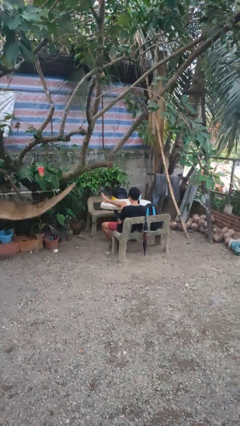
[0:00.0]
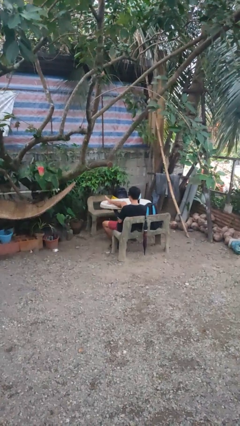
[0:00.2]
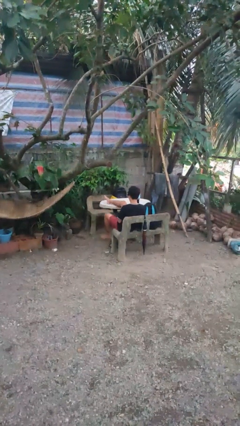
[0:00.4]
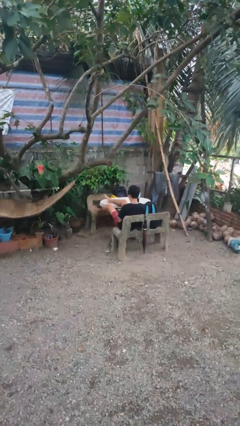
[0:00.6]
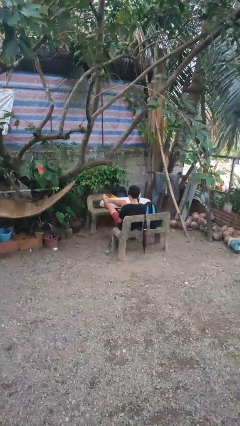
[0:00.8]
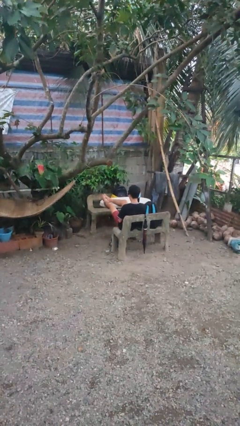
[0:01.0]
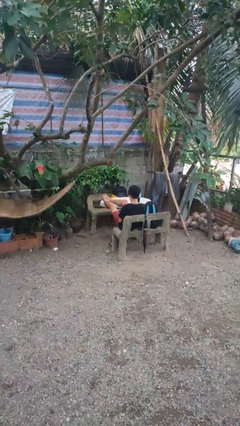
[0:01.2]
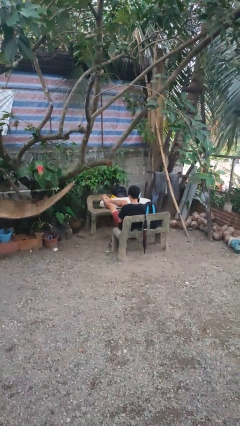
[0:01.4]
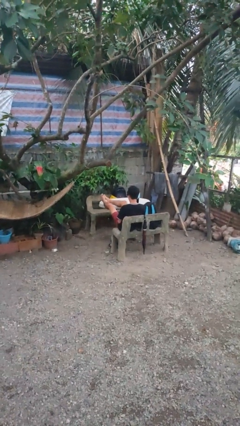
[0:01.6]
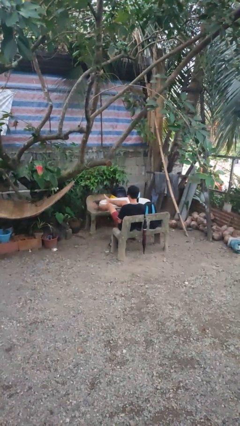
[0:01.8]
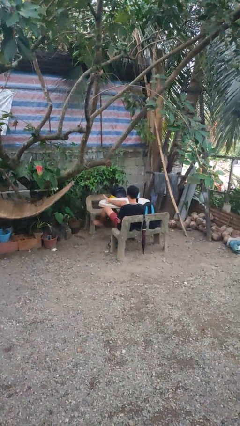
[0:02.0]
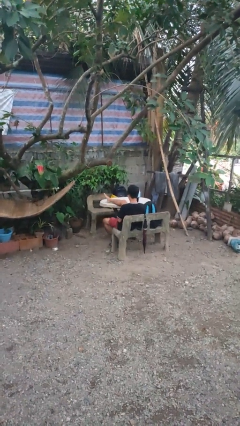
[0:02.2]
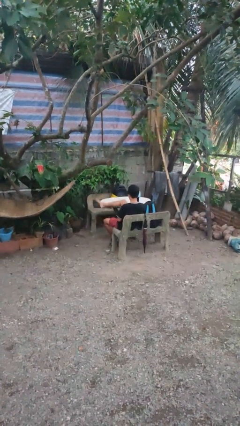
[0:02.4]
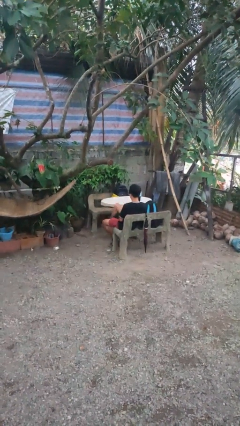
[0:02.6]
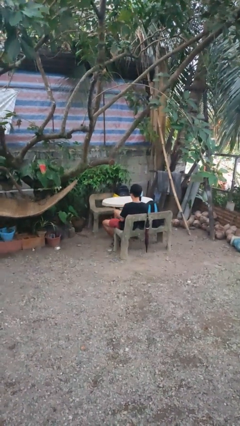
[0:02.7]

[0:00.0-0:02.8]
person puts feet up

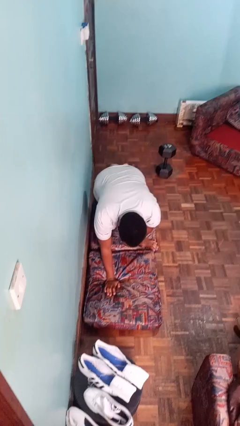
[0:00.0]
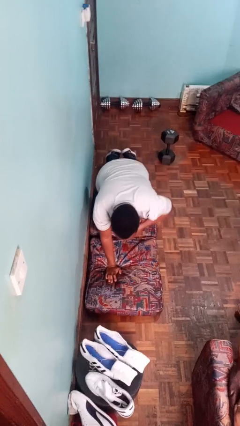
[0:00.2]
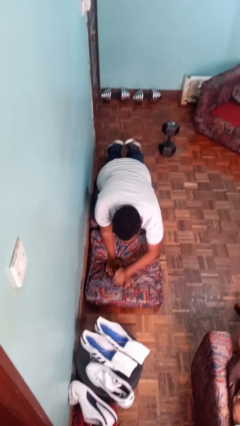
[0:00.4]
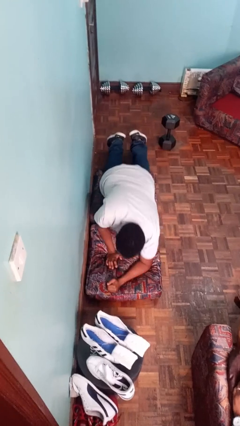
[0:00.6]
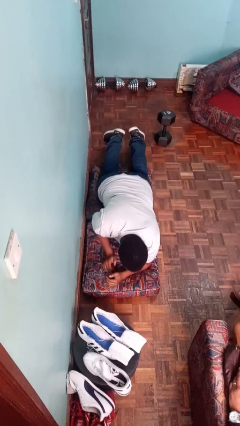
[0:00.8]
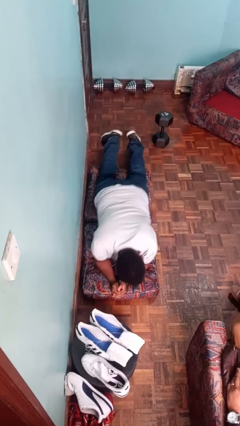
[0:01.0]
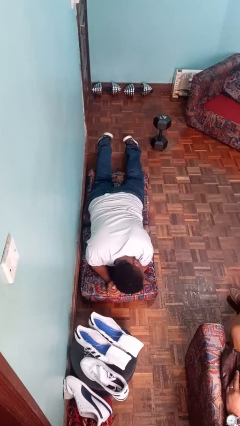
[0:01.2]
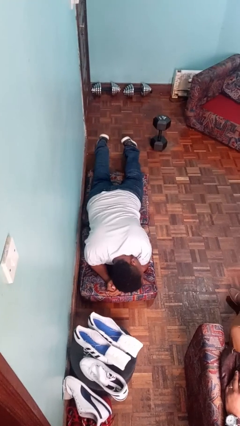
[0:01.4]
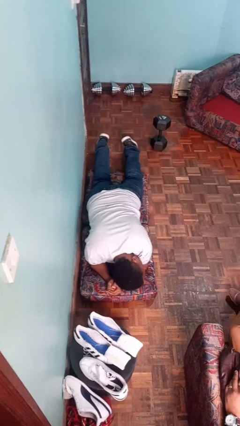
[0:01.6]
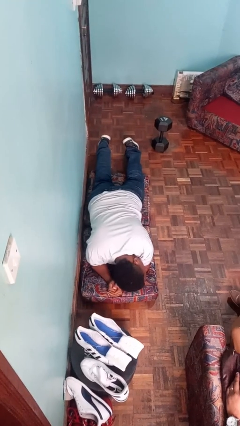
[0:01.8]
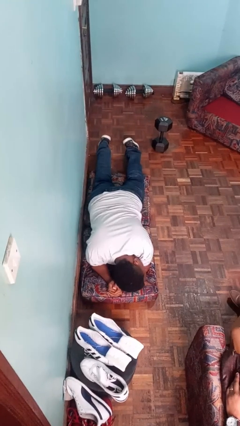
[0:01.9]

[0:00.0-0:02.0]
person lies down on floor

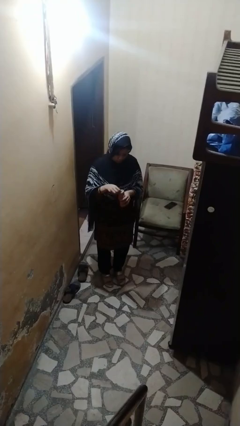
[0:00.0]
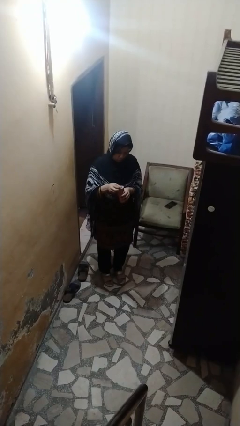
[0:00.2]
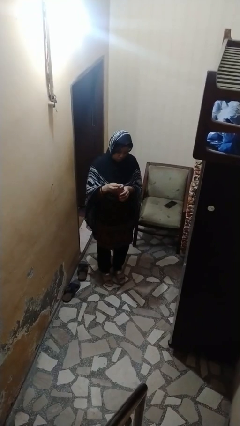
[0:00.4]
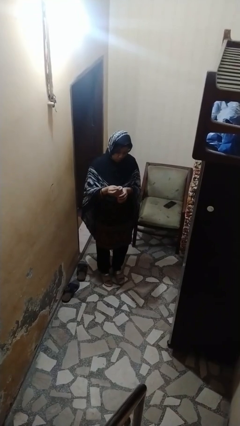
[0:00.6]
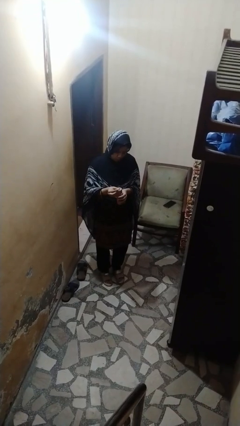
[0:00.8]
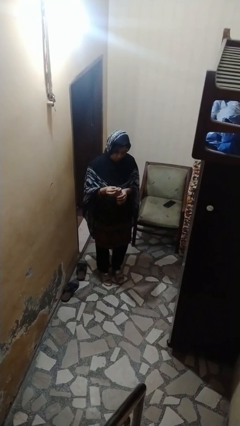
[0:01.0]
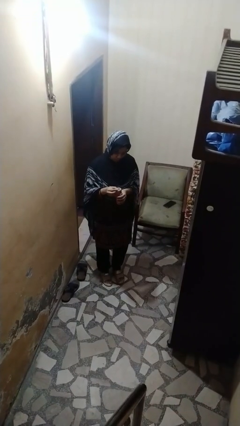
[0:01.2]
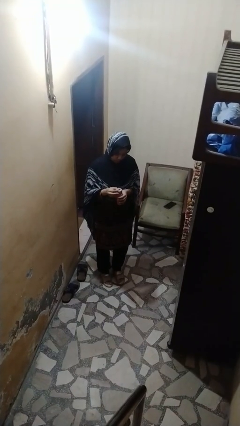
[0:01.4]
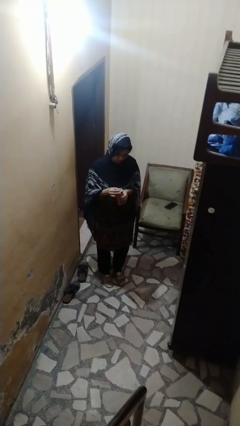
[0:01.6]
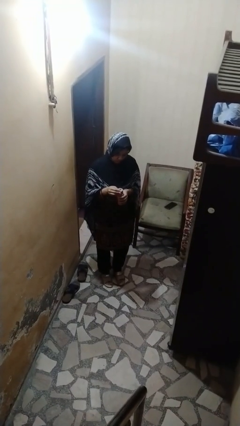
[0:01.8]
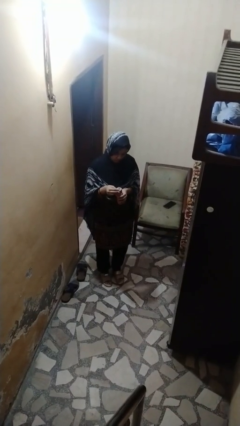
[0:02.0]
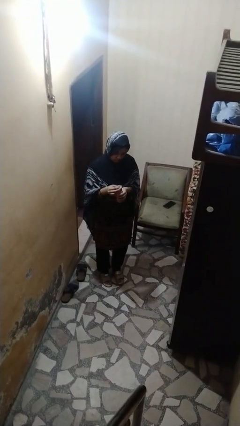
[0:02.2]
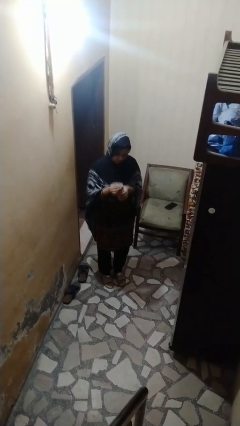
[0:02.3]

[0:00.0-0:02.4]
person opens beverage can

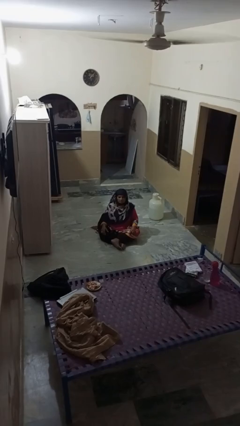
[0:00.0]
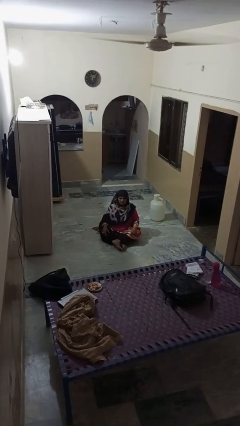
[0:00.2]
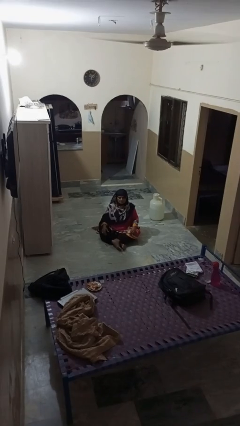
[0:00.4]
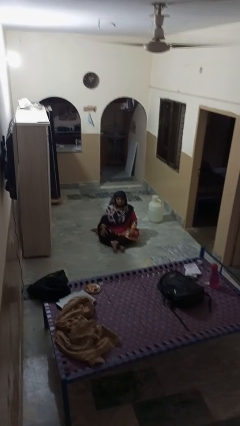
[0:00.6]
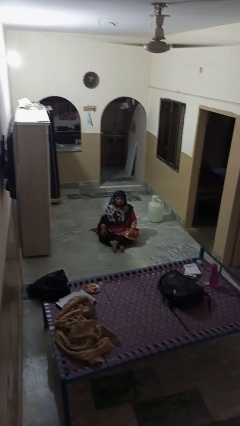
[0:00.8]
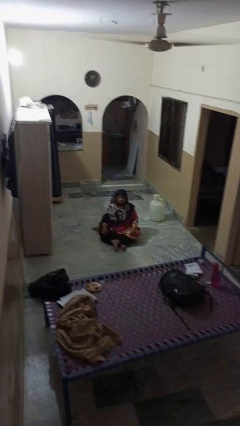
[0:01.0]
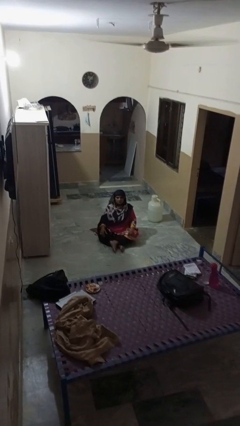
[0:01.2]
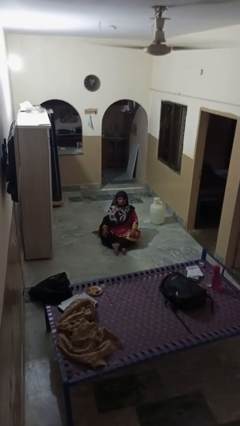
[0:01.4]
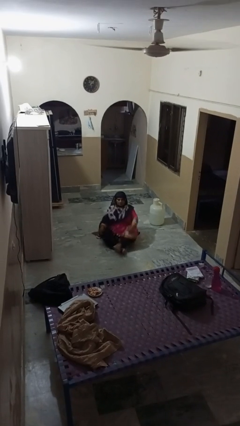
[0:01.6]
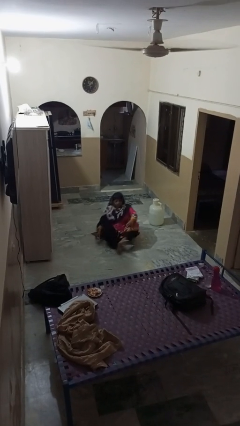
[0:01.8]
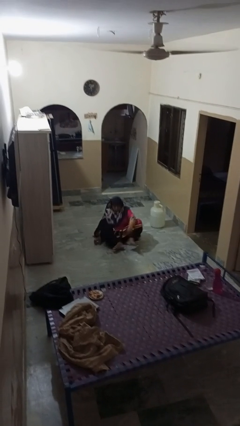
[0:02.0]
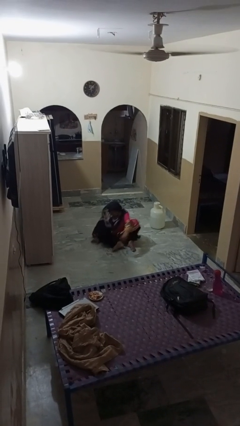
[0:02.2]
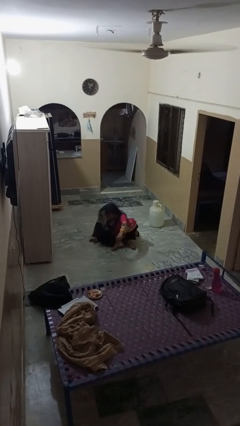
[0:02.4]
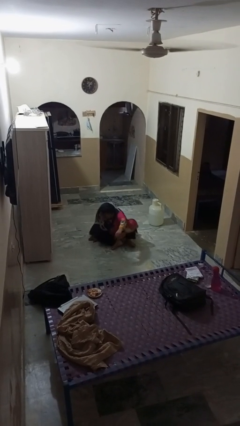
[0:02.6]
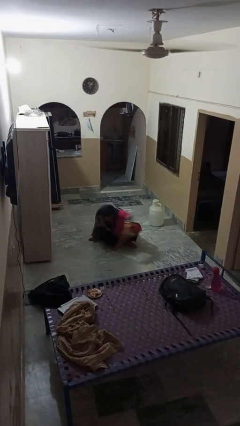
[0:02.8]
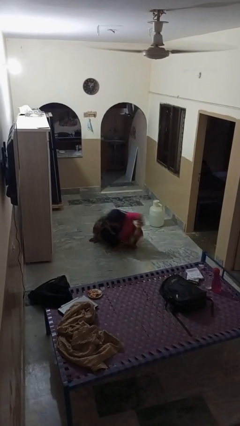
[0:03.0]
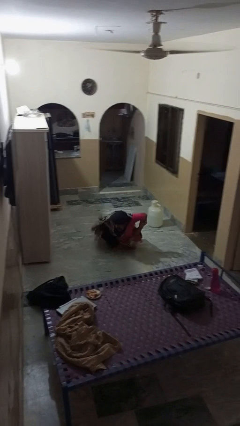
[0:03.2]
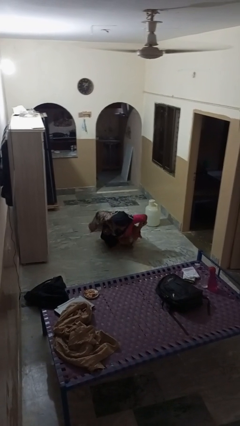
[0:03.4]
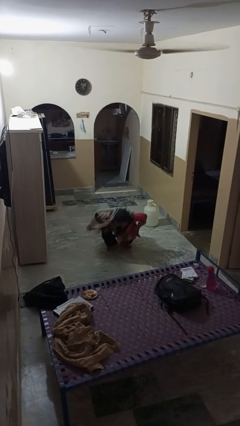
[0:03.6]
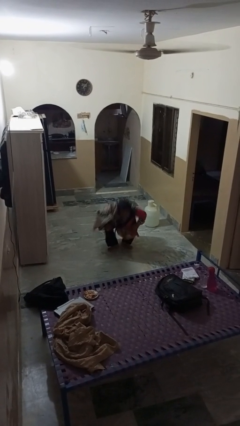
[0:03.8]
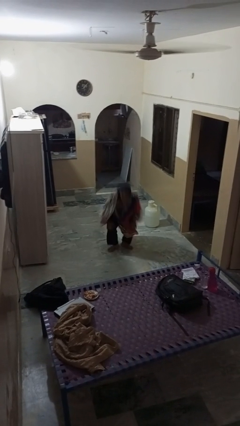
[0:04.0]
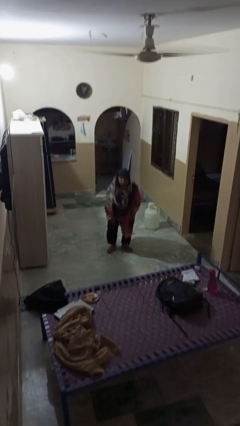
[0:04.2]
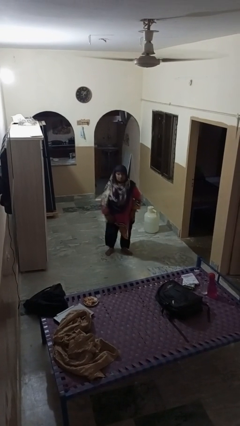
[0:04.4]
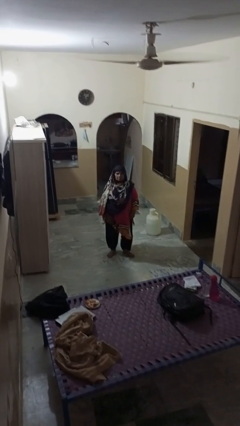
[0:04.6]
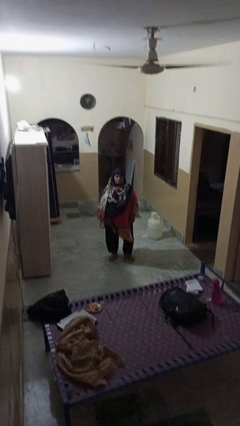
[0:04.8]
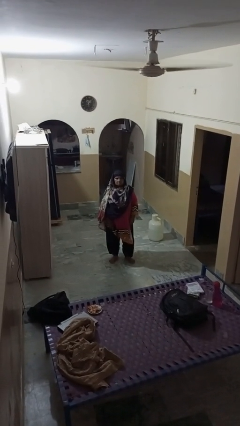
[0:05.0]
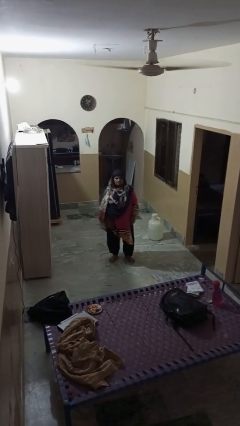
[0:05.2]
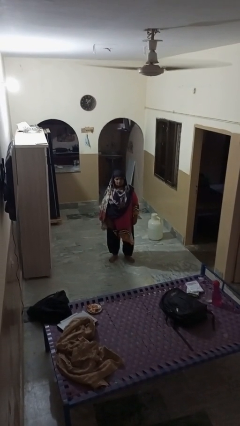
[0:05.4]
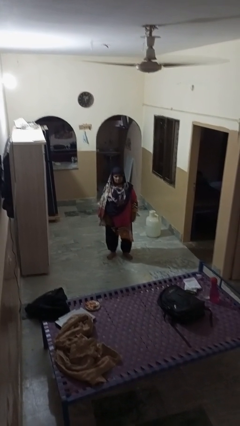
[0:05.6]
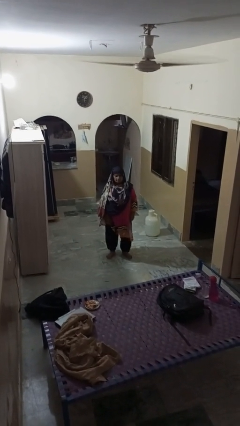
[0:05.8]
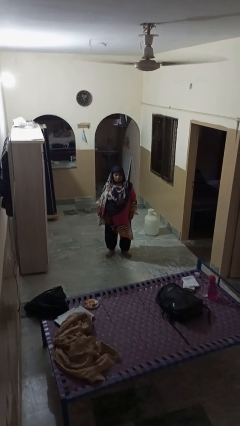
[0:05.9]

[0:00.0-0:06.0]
person stands up from floor

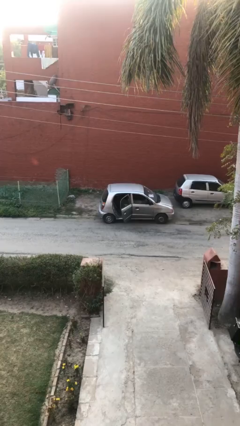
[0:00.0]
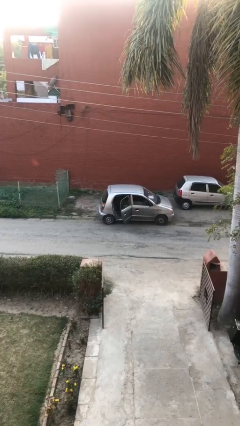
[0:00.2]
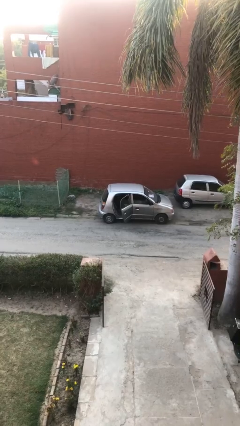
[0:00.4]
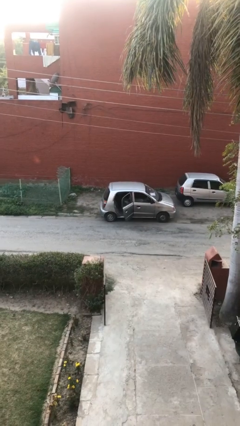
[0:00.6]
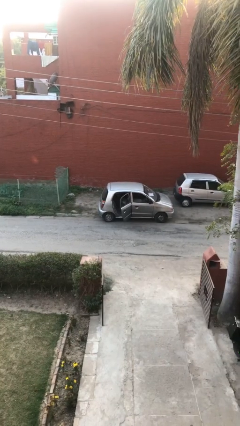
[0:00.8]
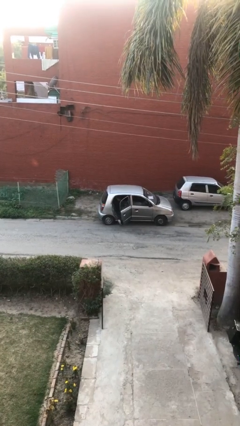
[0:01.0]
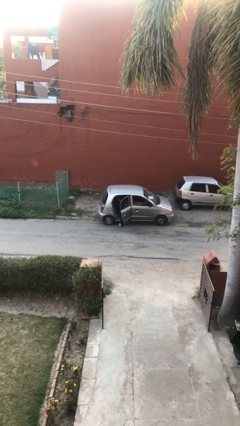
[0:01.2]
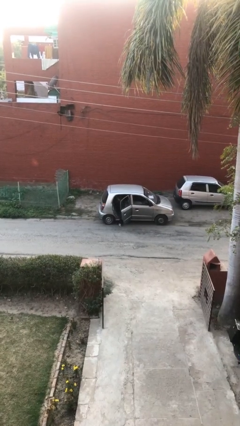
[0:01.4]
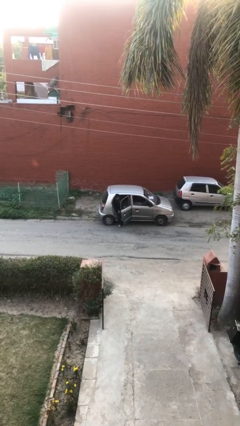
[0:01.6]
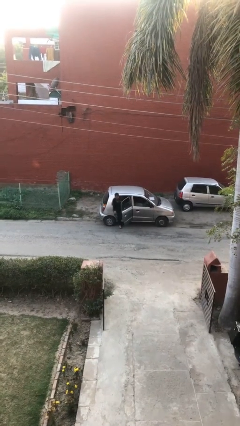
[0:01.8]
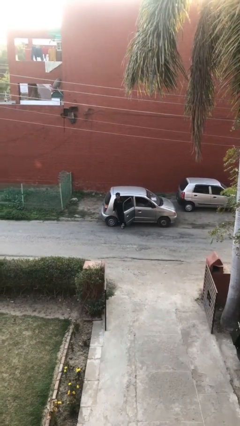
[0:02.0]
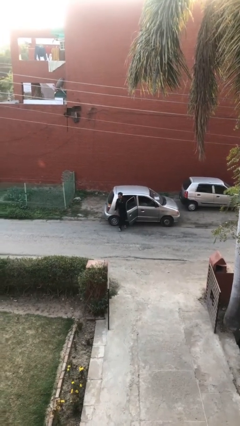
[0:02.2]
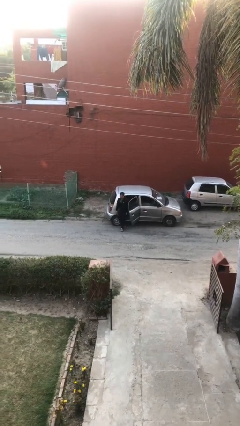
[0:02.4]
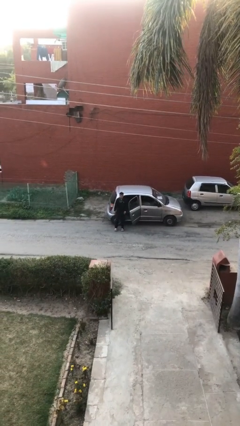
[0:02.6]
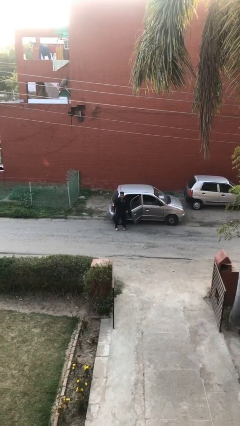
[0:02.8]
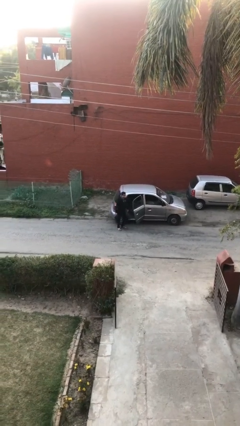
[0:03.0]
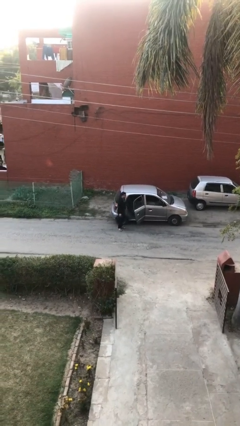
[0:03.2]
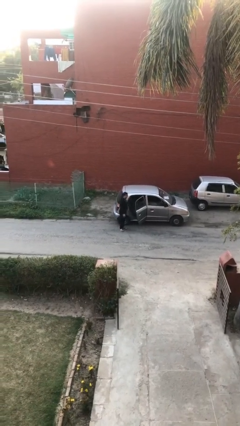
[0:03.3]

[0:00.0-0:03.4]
person exits car

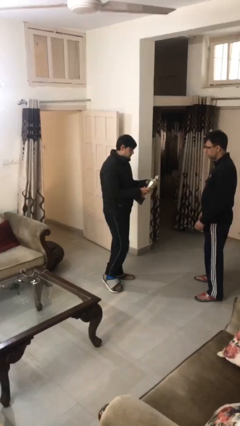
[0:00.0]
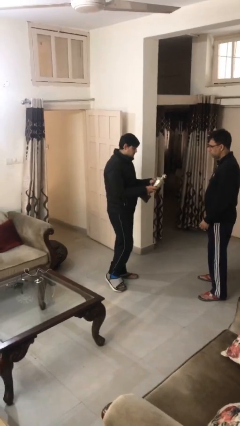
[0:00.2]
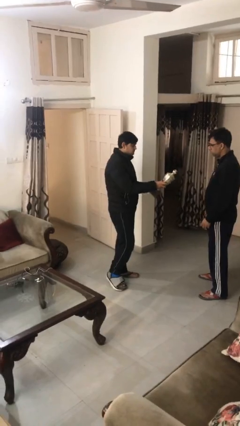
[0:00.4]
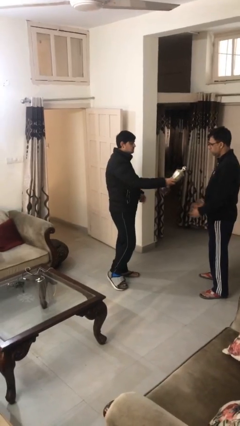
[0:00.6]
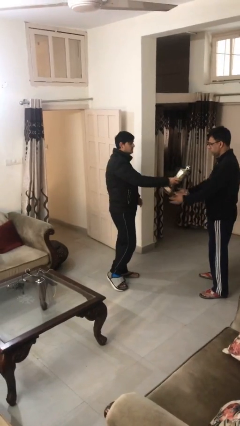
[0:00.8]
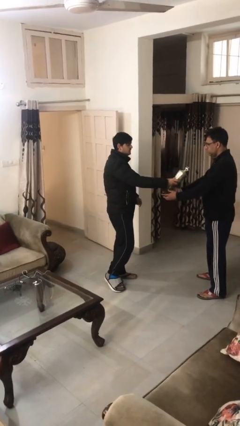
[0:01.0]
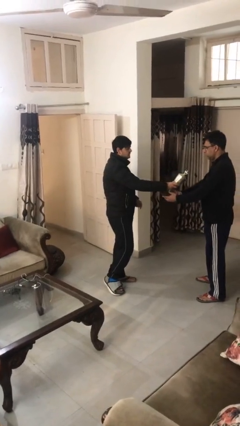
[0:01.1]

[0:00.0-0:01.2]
person transfers object to person

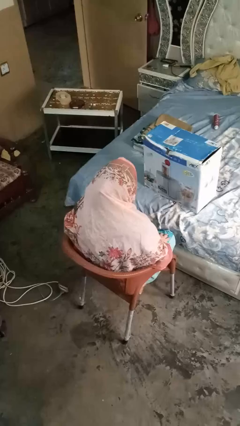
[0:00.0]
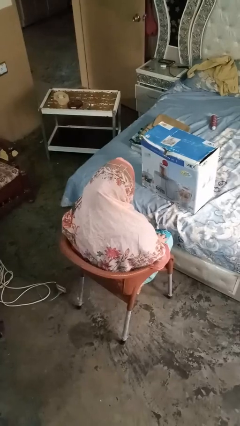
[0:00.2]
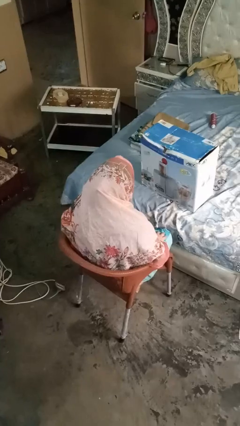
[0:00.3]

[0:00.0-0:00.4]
person closes box
